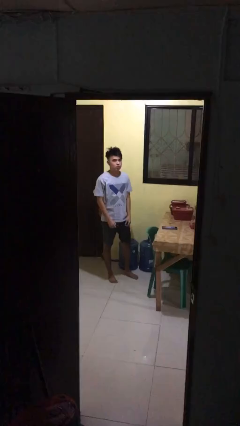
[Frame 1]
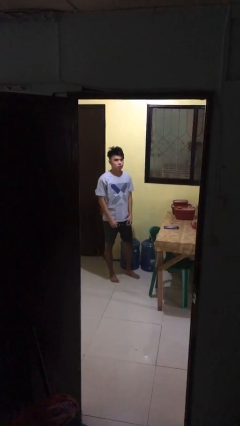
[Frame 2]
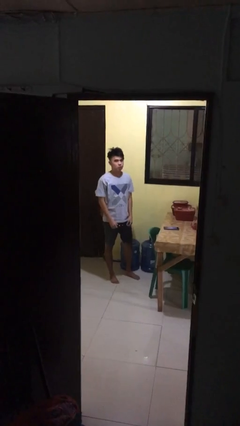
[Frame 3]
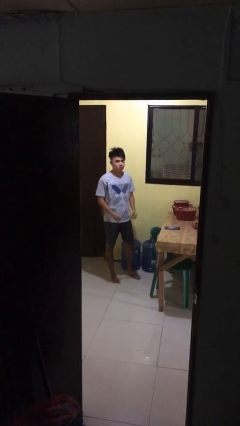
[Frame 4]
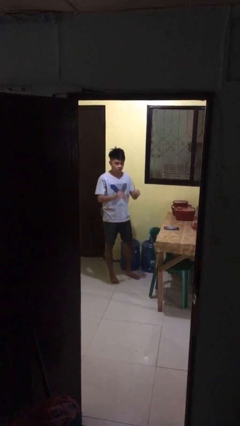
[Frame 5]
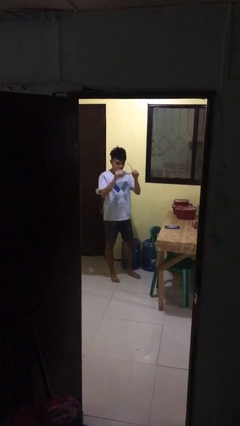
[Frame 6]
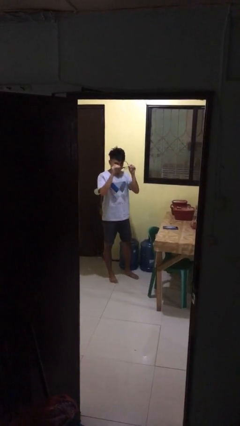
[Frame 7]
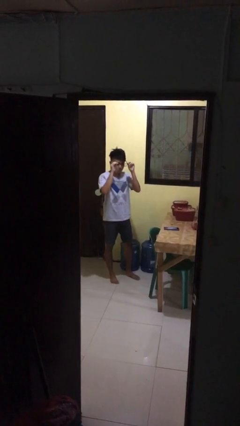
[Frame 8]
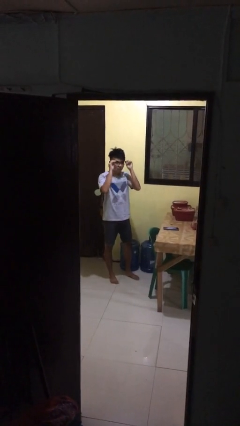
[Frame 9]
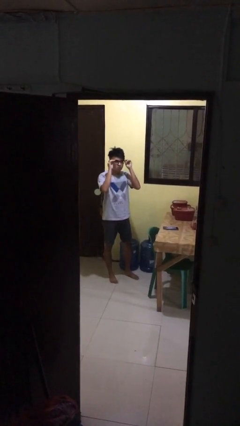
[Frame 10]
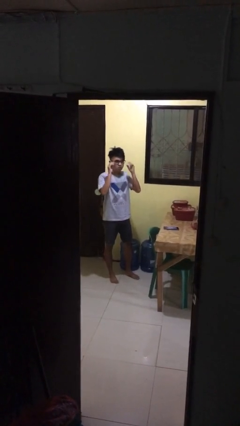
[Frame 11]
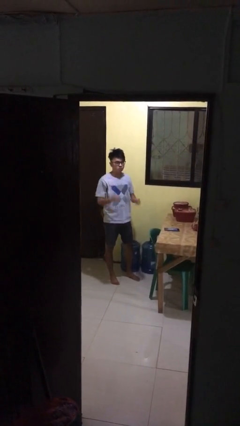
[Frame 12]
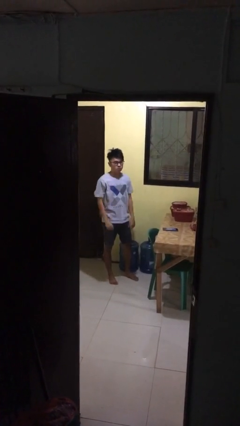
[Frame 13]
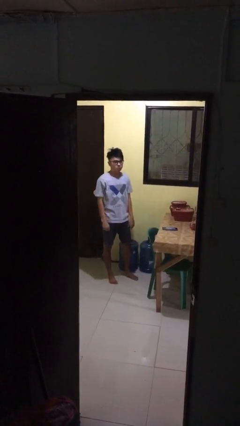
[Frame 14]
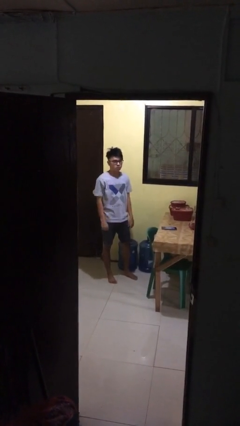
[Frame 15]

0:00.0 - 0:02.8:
person puts on glasses

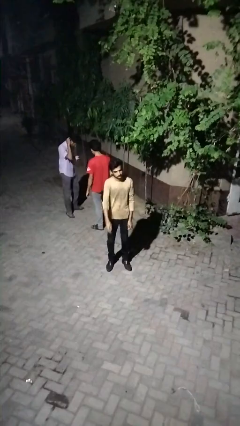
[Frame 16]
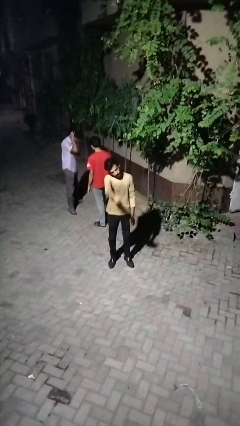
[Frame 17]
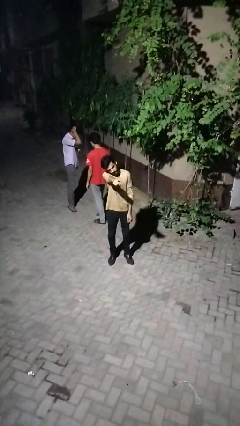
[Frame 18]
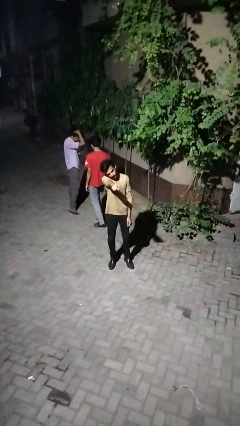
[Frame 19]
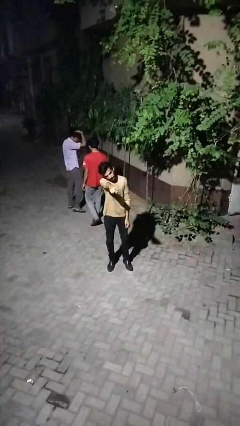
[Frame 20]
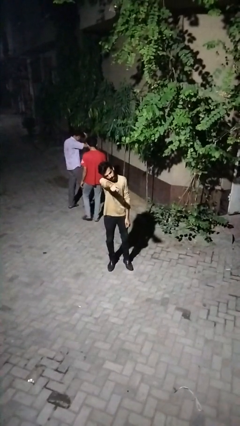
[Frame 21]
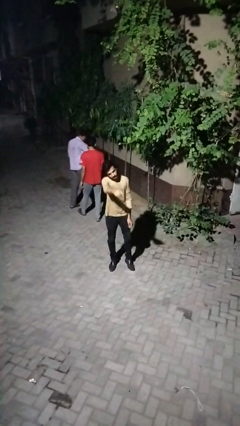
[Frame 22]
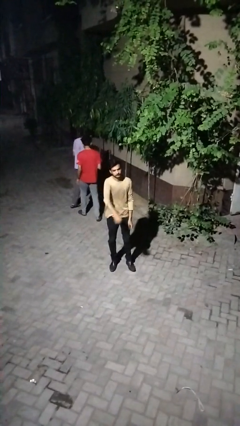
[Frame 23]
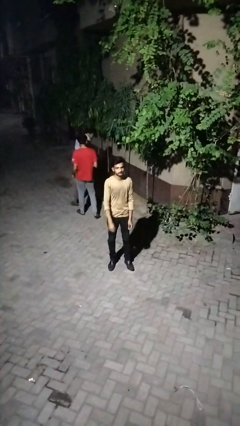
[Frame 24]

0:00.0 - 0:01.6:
person points at person

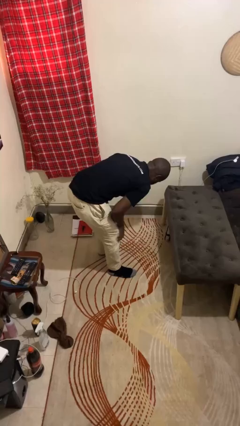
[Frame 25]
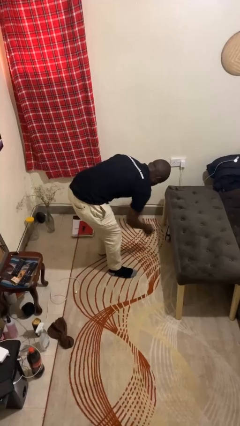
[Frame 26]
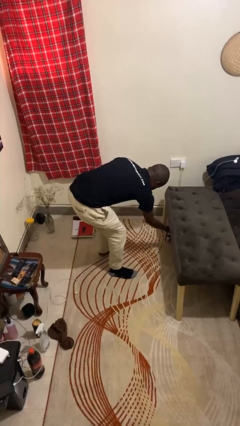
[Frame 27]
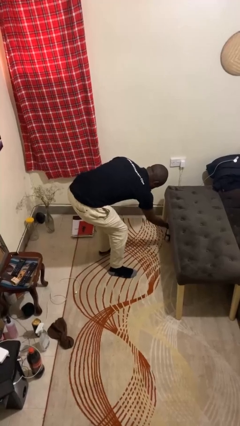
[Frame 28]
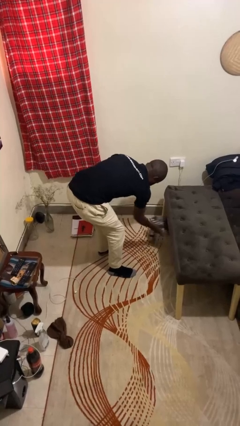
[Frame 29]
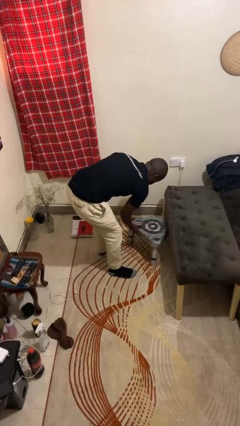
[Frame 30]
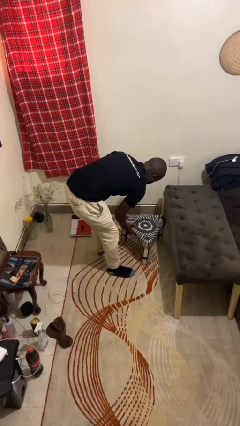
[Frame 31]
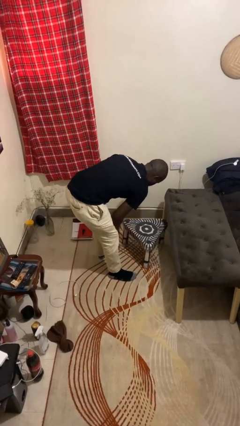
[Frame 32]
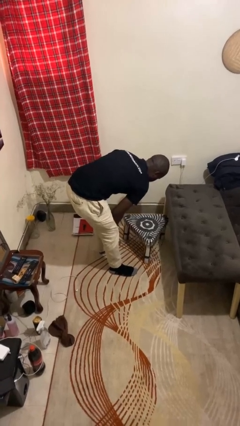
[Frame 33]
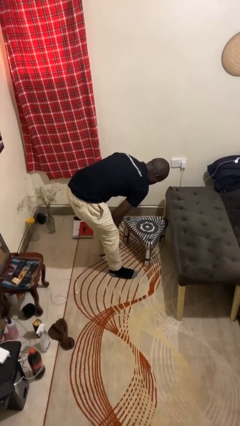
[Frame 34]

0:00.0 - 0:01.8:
person pulls out chair

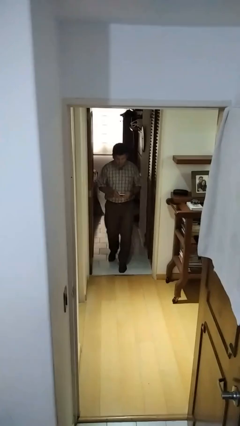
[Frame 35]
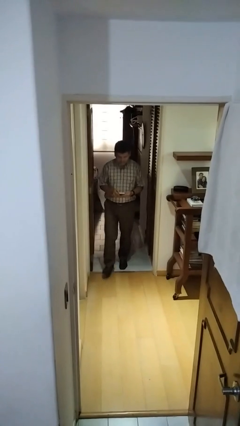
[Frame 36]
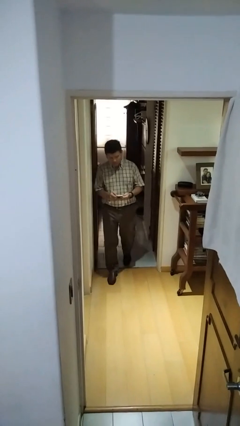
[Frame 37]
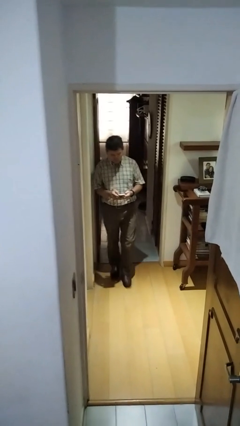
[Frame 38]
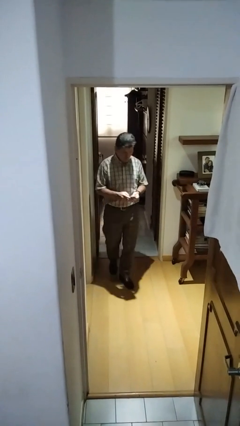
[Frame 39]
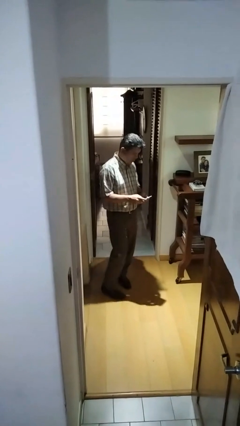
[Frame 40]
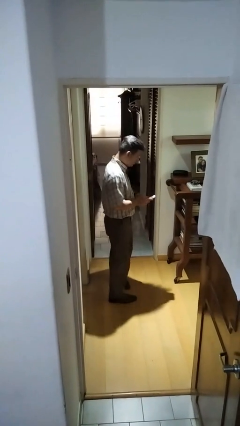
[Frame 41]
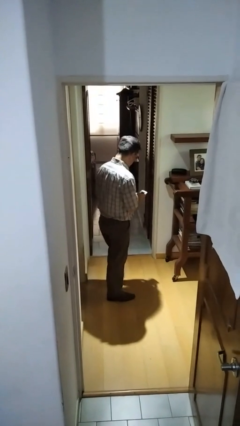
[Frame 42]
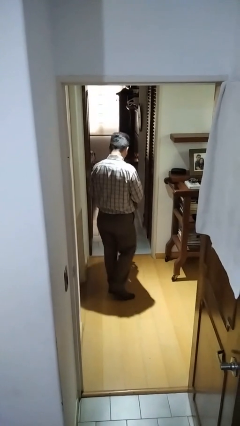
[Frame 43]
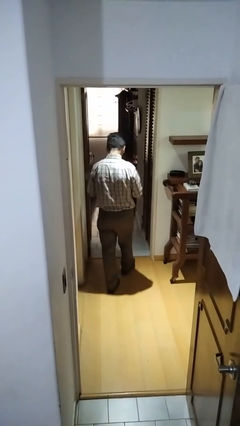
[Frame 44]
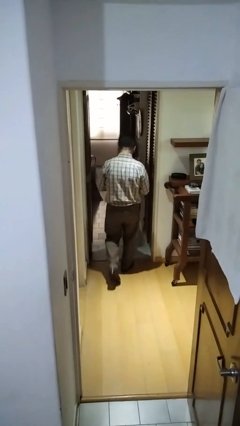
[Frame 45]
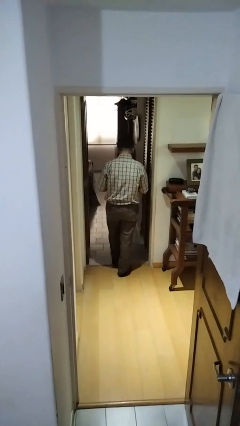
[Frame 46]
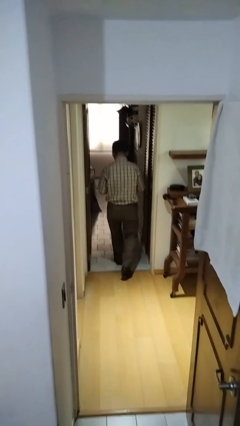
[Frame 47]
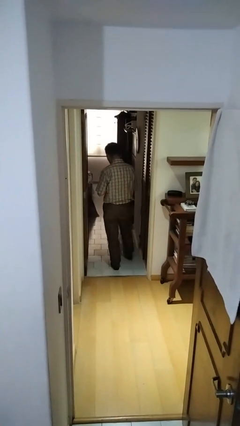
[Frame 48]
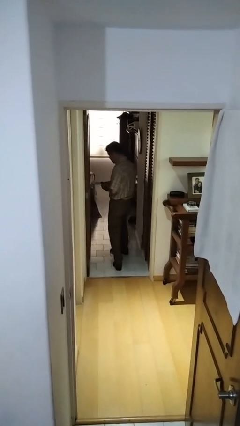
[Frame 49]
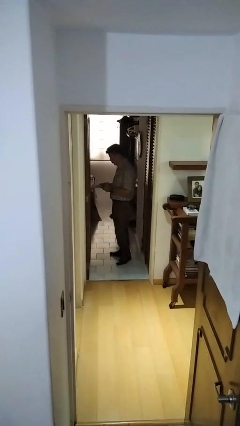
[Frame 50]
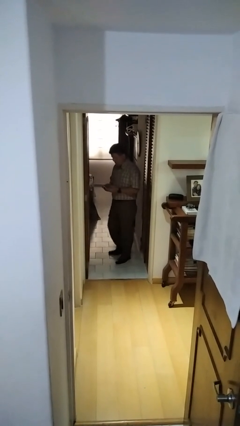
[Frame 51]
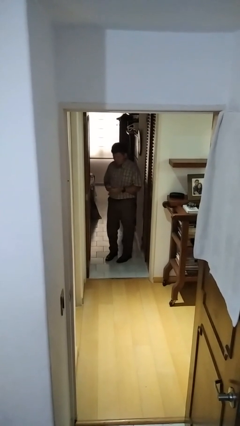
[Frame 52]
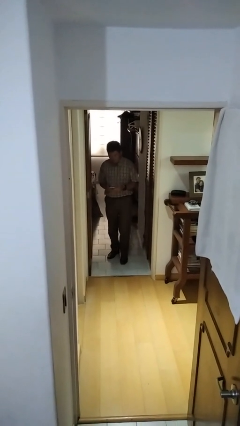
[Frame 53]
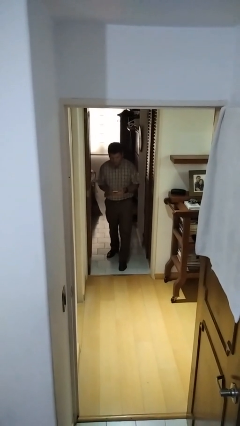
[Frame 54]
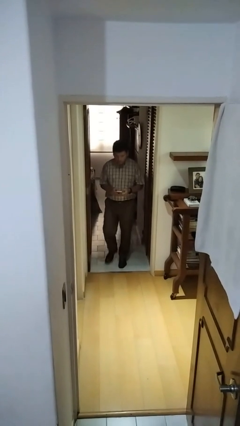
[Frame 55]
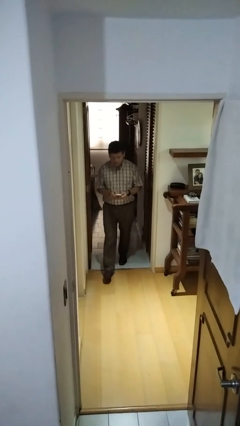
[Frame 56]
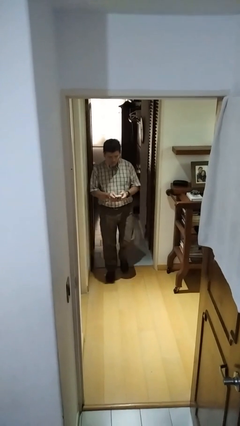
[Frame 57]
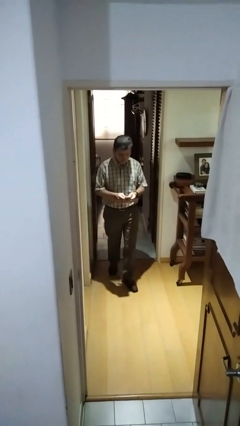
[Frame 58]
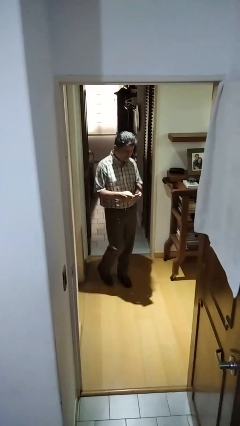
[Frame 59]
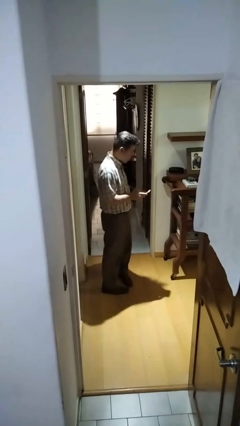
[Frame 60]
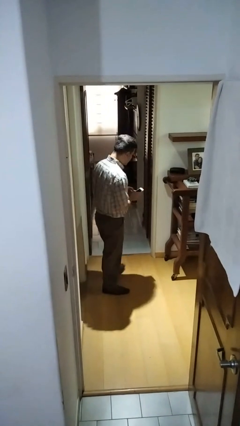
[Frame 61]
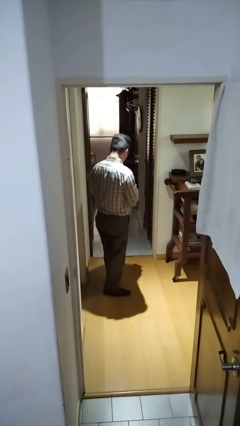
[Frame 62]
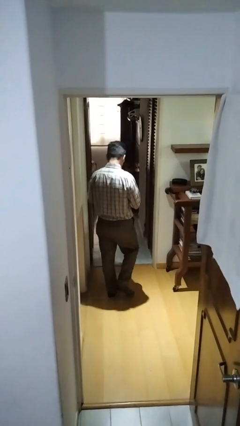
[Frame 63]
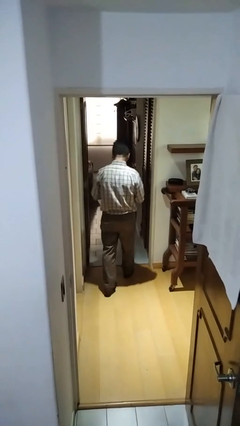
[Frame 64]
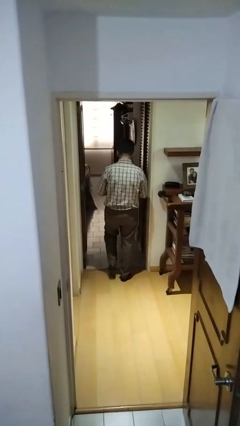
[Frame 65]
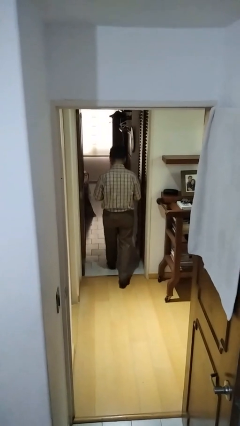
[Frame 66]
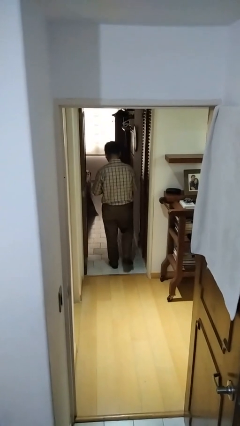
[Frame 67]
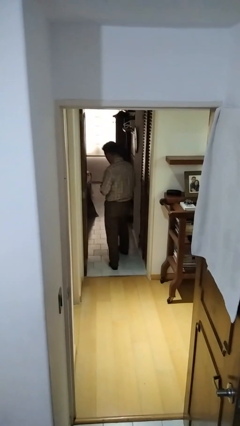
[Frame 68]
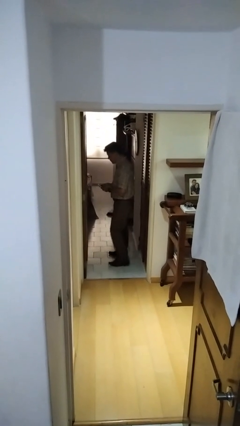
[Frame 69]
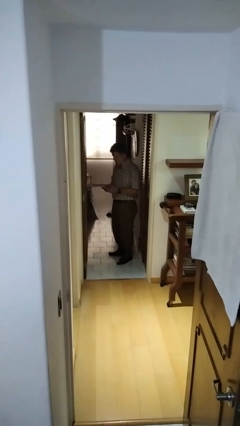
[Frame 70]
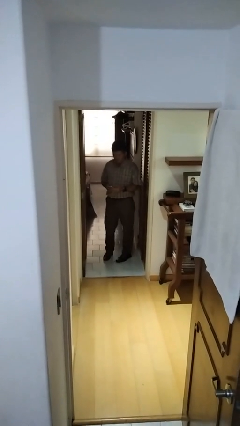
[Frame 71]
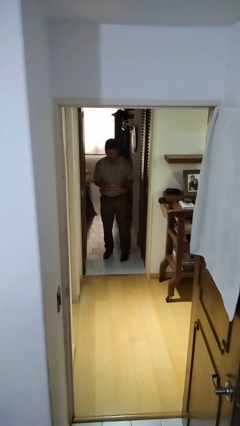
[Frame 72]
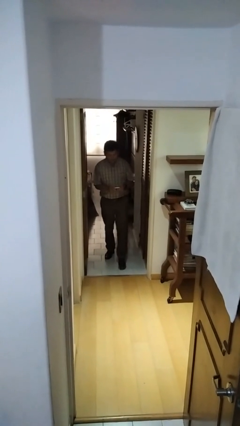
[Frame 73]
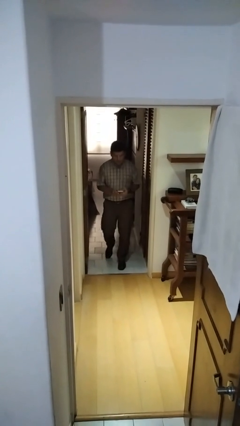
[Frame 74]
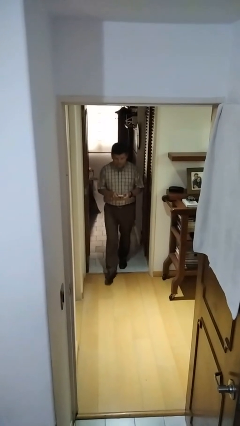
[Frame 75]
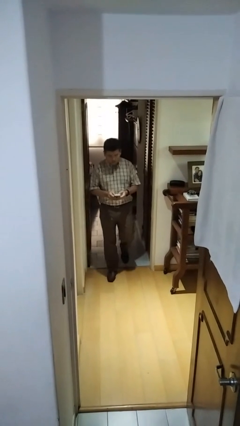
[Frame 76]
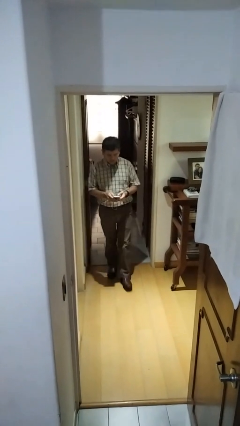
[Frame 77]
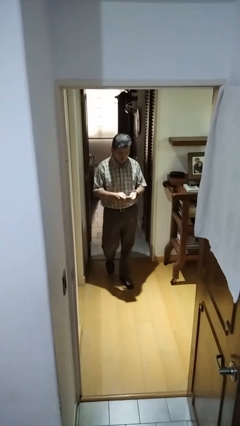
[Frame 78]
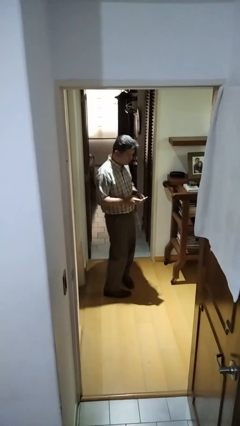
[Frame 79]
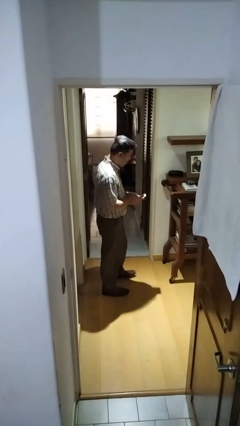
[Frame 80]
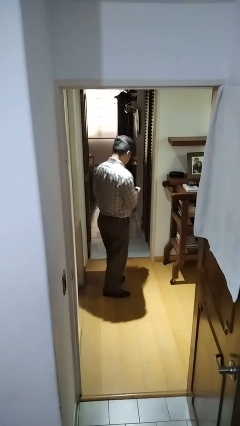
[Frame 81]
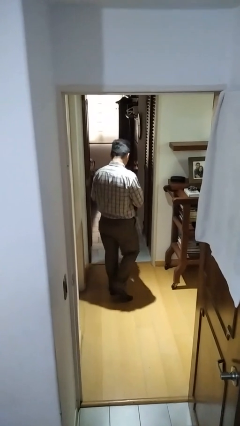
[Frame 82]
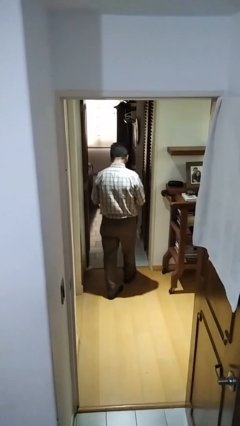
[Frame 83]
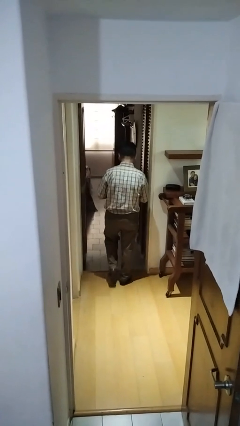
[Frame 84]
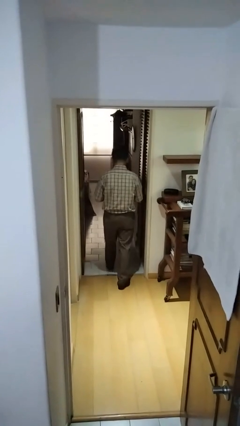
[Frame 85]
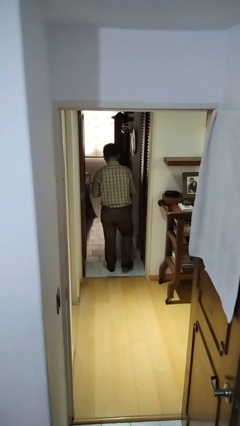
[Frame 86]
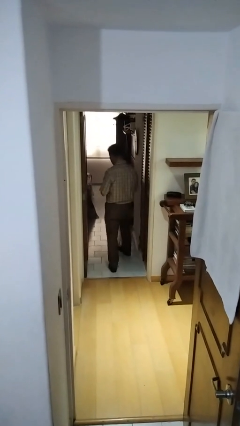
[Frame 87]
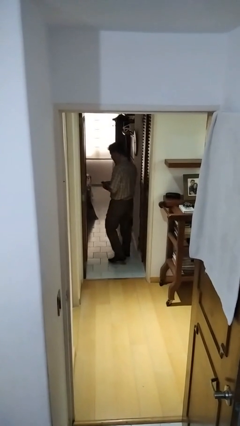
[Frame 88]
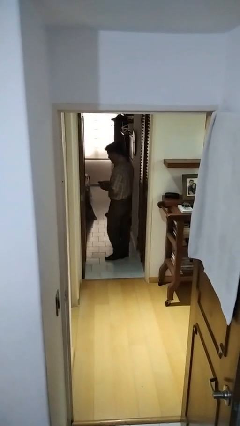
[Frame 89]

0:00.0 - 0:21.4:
person texts on phone

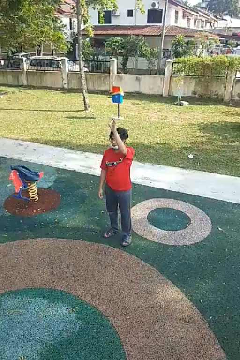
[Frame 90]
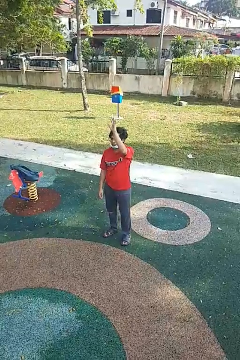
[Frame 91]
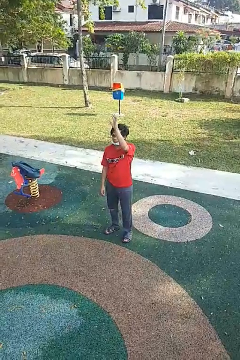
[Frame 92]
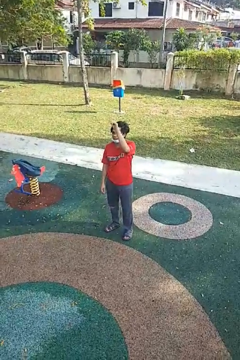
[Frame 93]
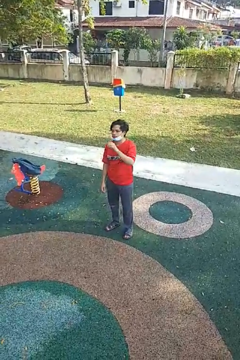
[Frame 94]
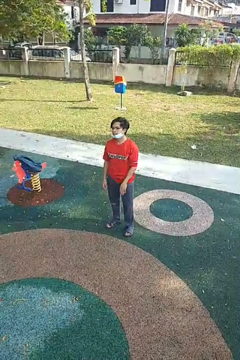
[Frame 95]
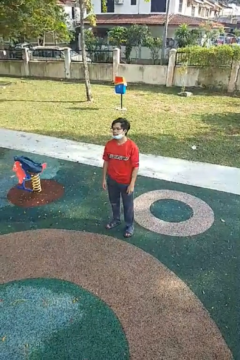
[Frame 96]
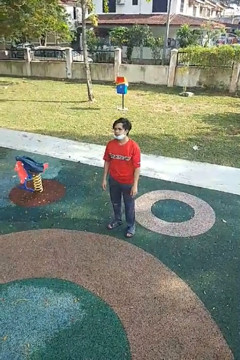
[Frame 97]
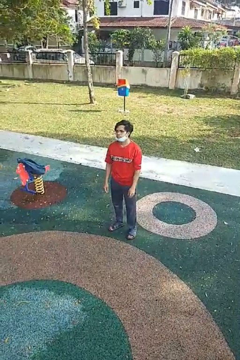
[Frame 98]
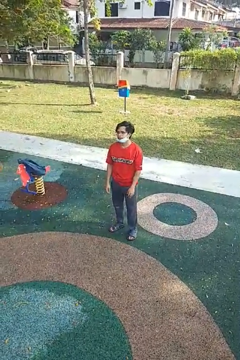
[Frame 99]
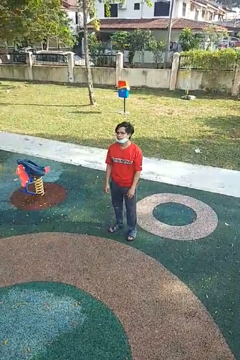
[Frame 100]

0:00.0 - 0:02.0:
person gestures lower hand
